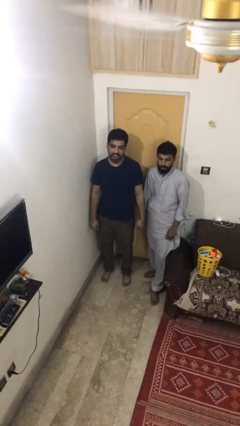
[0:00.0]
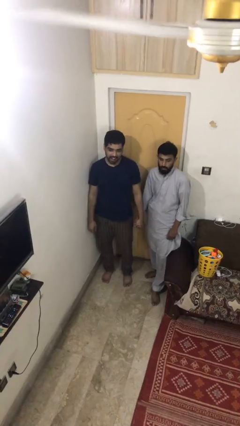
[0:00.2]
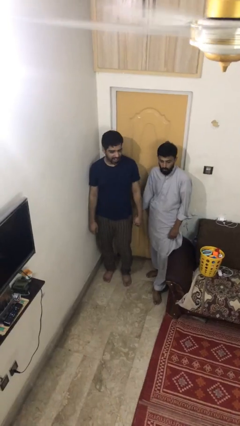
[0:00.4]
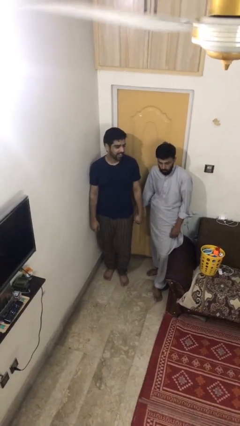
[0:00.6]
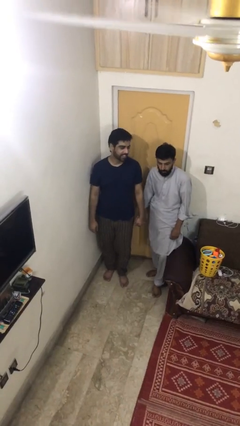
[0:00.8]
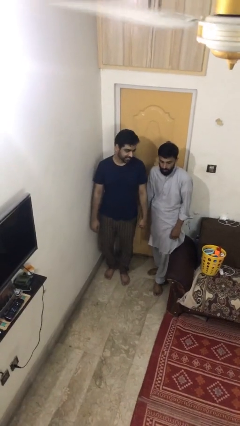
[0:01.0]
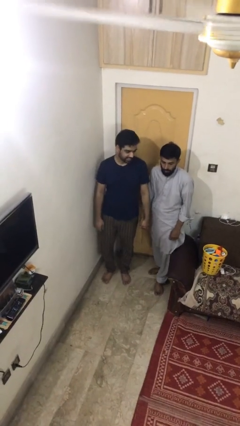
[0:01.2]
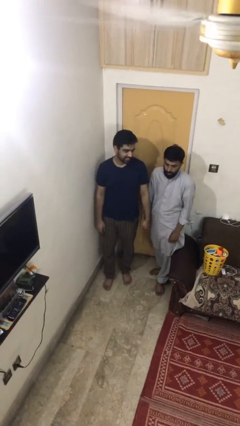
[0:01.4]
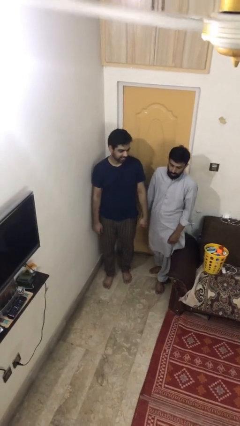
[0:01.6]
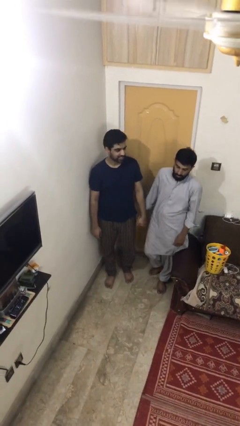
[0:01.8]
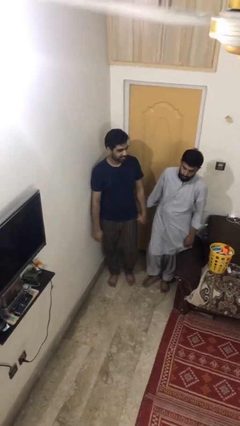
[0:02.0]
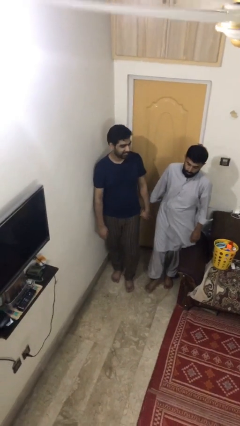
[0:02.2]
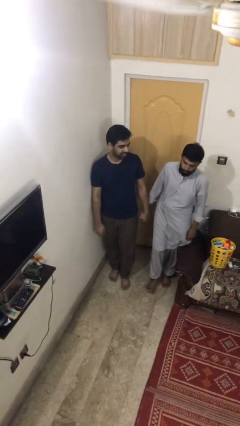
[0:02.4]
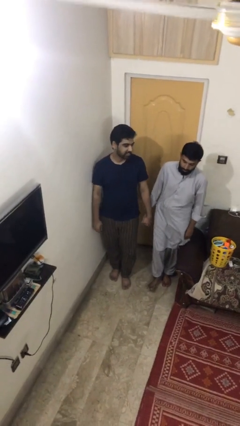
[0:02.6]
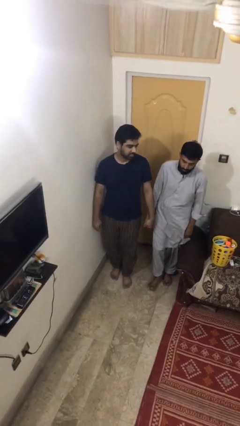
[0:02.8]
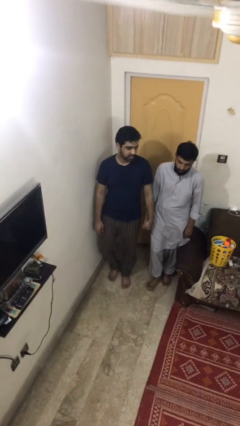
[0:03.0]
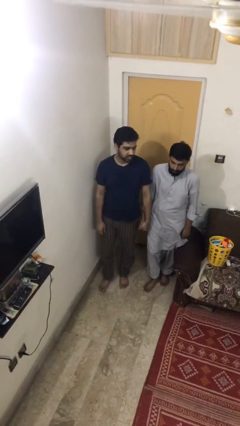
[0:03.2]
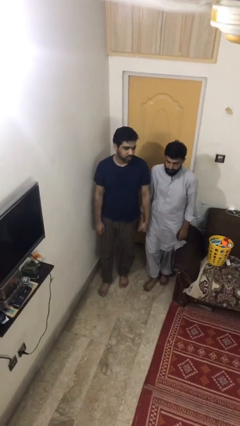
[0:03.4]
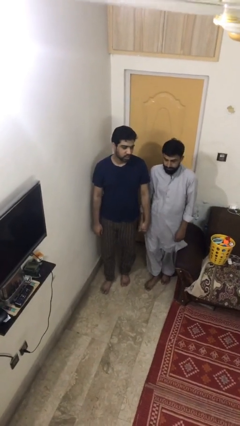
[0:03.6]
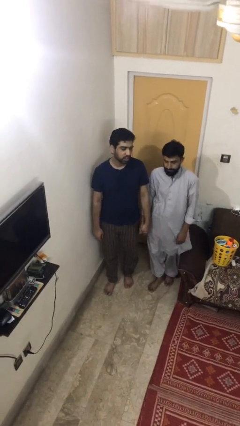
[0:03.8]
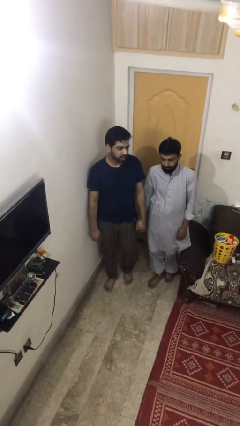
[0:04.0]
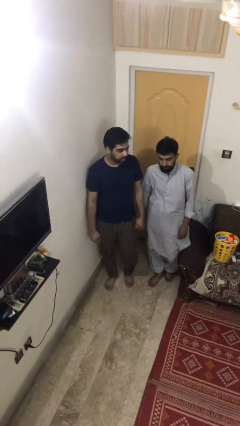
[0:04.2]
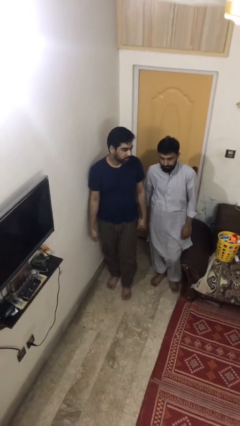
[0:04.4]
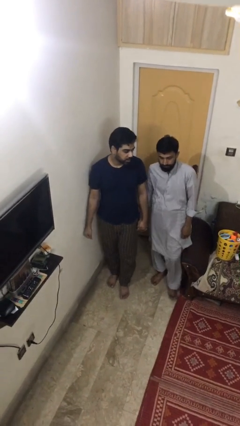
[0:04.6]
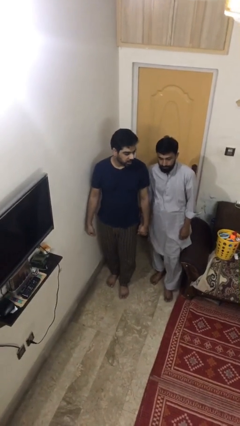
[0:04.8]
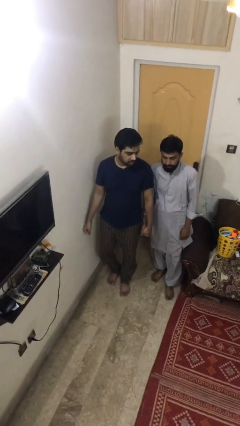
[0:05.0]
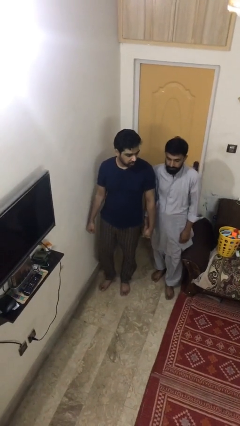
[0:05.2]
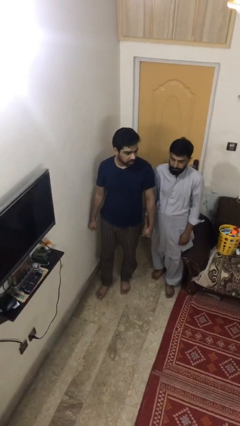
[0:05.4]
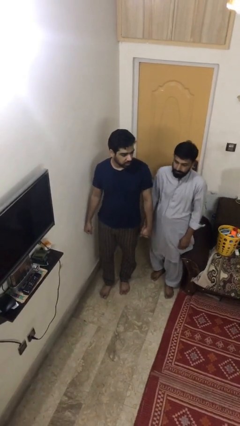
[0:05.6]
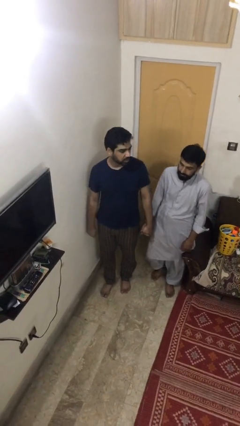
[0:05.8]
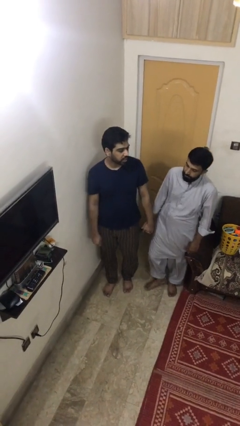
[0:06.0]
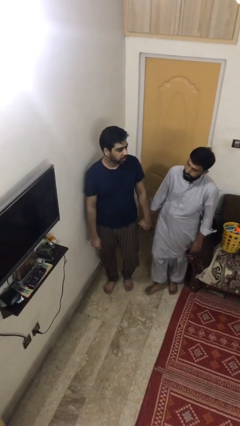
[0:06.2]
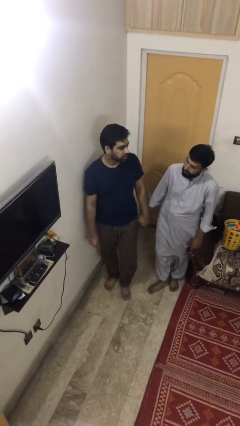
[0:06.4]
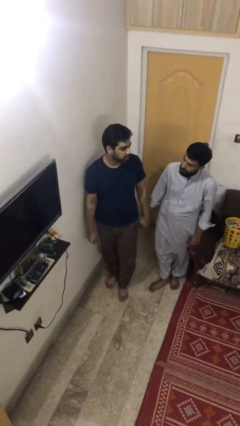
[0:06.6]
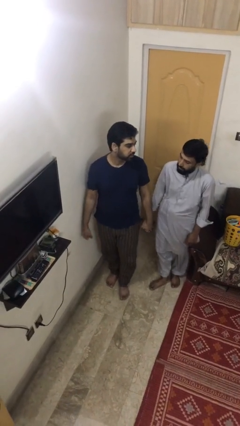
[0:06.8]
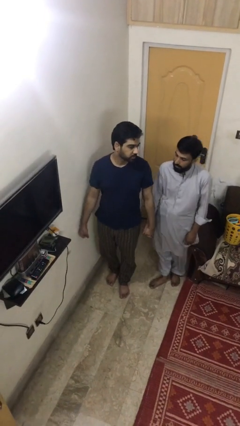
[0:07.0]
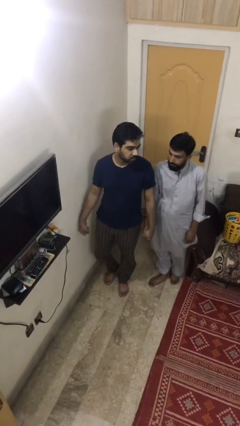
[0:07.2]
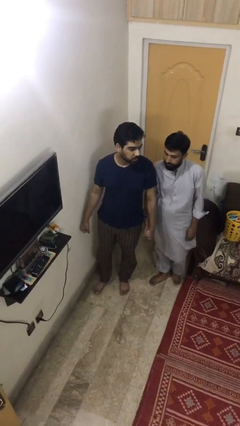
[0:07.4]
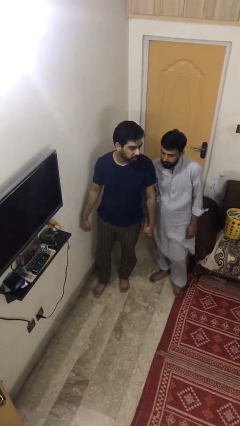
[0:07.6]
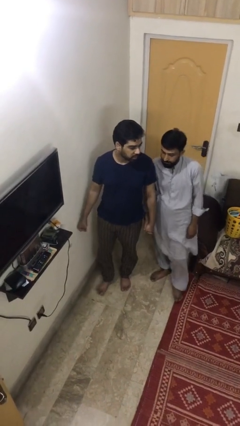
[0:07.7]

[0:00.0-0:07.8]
person holds hand

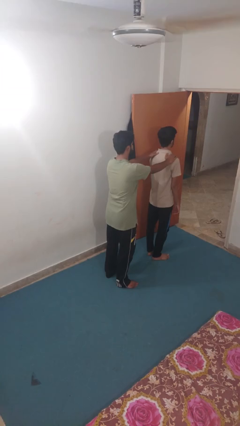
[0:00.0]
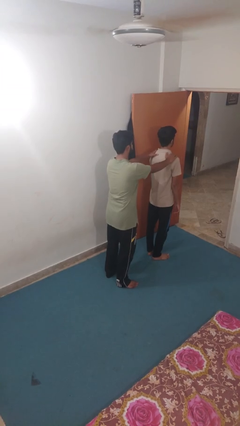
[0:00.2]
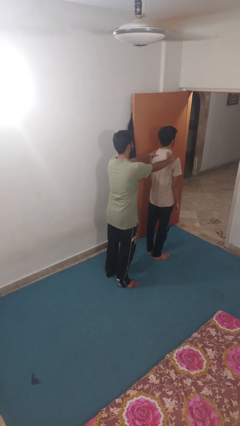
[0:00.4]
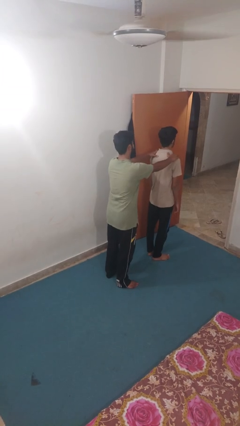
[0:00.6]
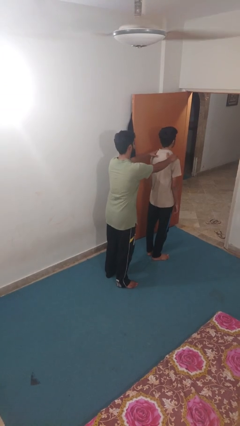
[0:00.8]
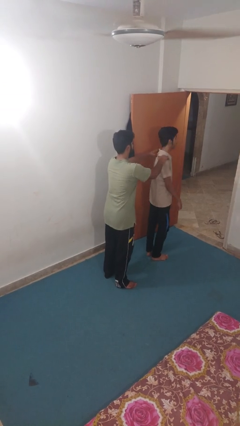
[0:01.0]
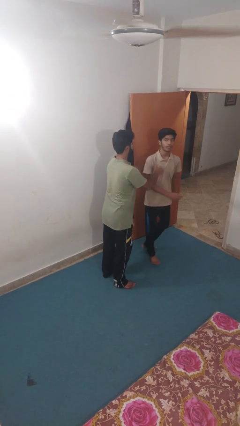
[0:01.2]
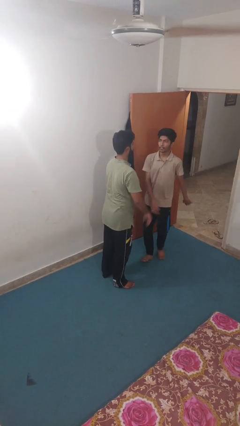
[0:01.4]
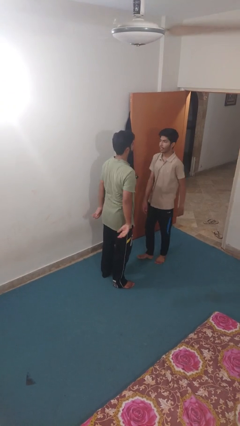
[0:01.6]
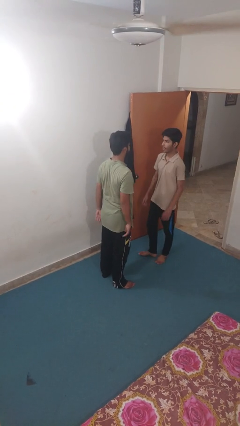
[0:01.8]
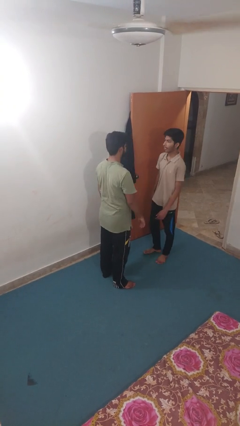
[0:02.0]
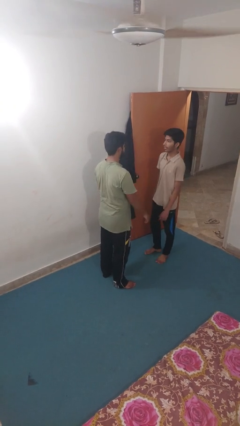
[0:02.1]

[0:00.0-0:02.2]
person spins person around

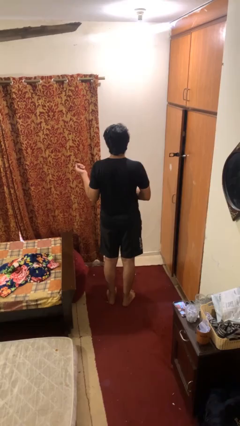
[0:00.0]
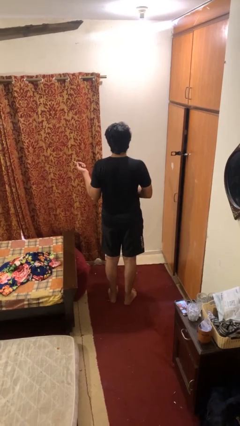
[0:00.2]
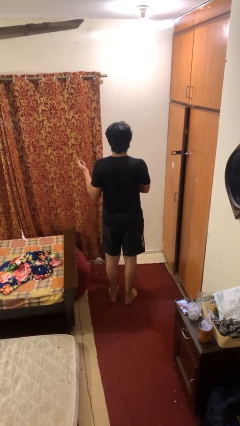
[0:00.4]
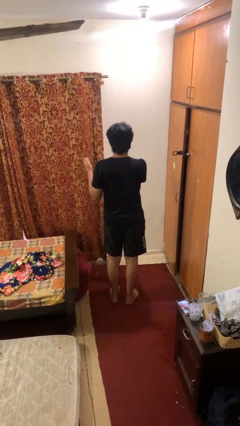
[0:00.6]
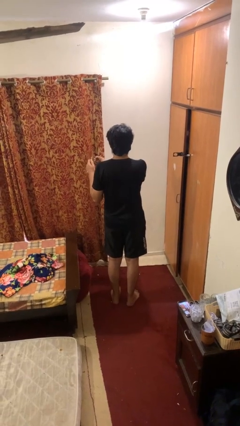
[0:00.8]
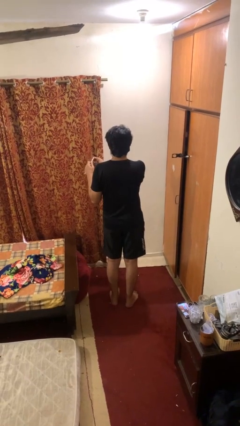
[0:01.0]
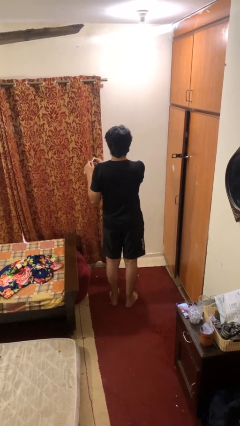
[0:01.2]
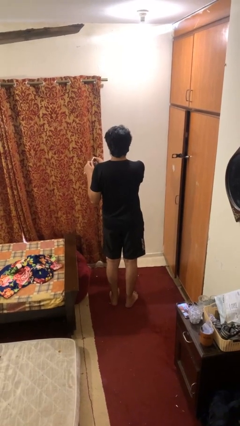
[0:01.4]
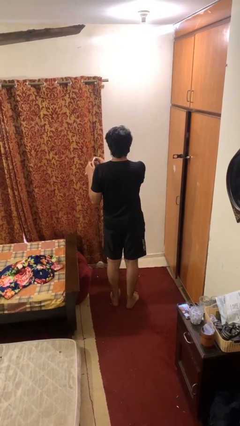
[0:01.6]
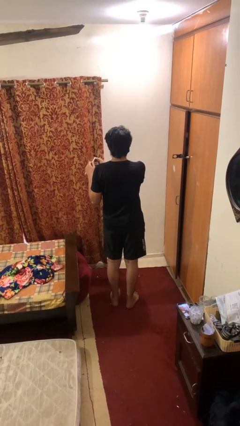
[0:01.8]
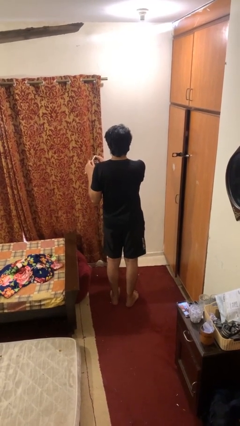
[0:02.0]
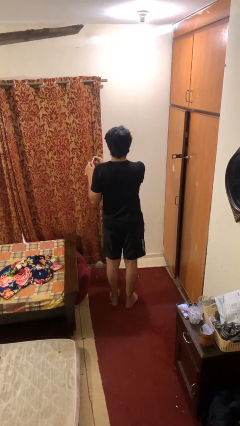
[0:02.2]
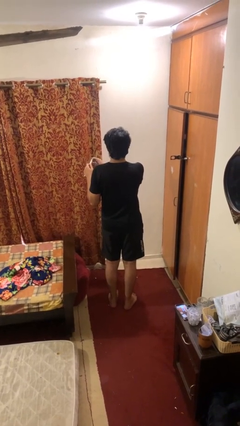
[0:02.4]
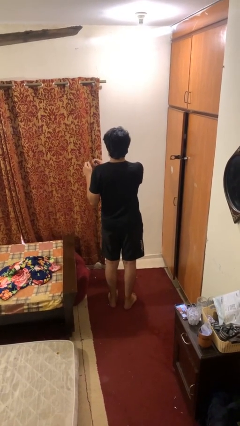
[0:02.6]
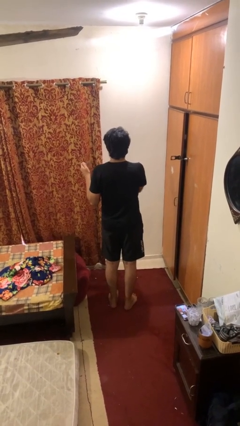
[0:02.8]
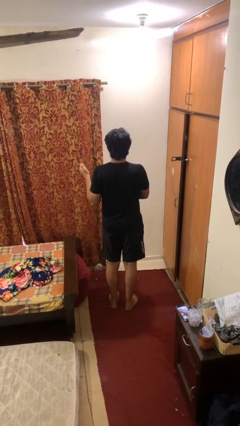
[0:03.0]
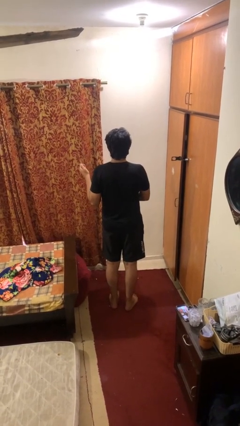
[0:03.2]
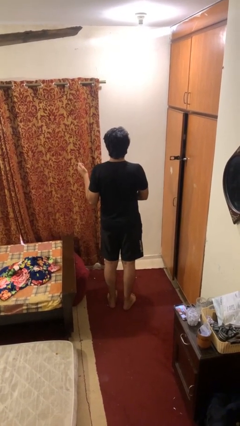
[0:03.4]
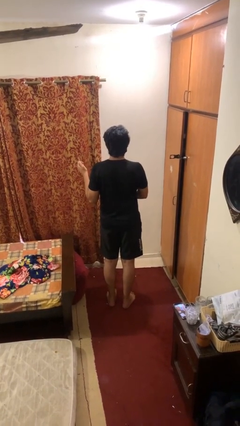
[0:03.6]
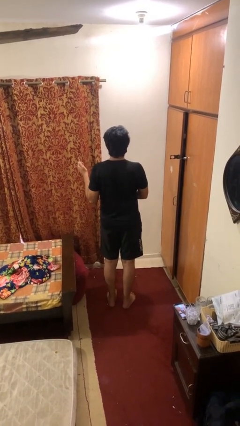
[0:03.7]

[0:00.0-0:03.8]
person files fingernails

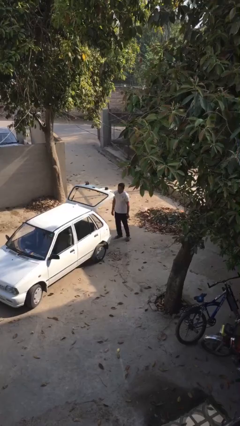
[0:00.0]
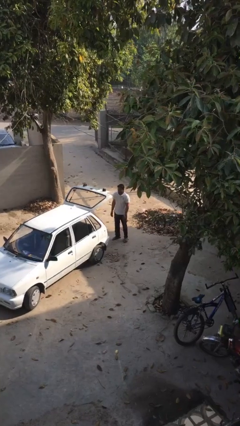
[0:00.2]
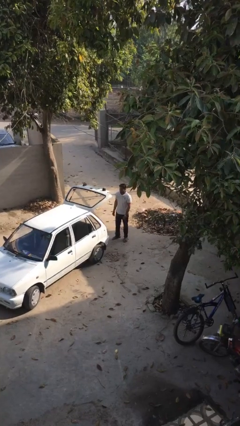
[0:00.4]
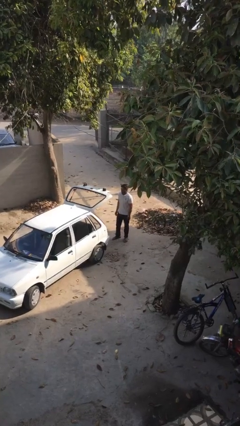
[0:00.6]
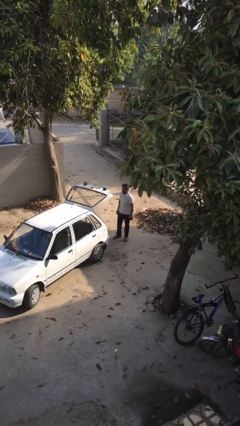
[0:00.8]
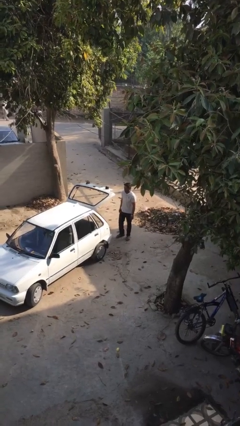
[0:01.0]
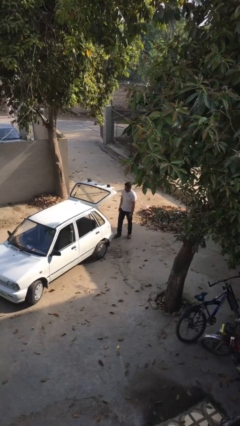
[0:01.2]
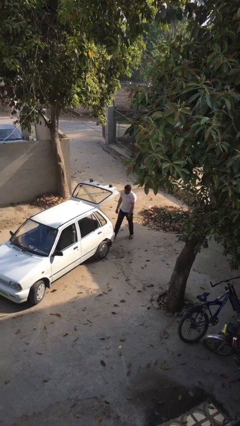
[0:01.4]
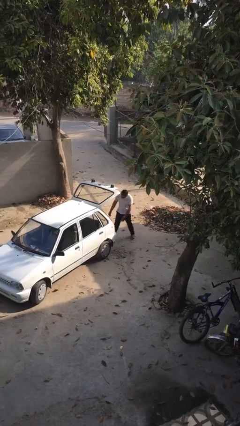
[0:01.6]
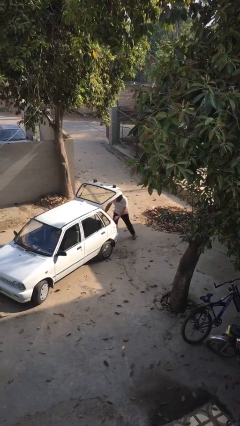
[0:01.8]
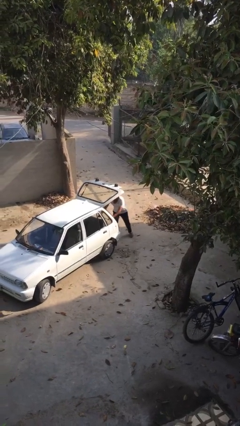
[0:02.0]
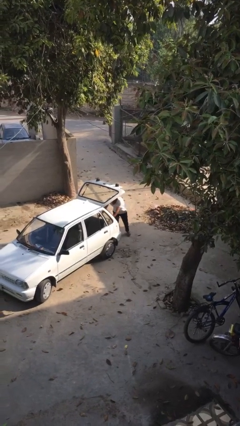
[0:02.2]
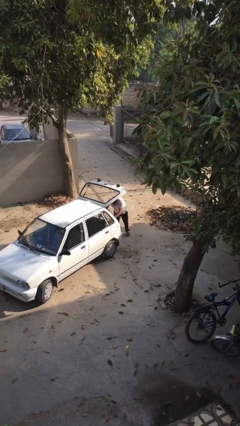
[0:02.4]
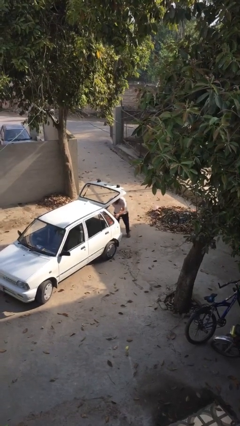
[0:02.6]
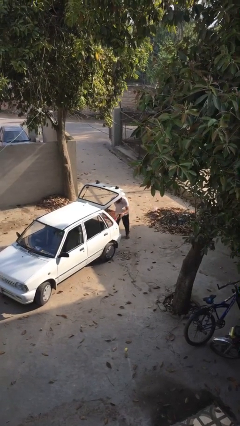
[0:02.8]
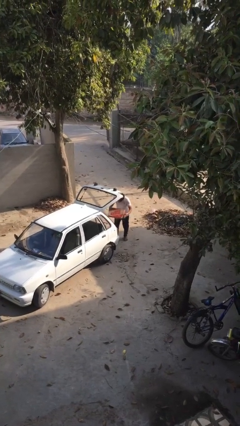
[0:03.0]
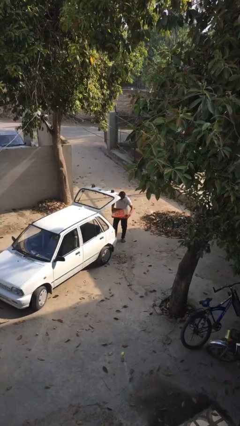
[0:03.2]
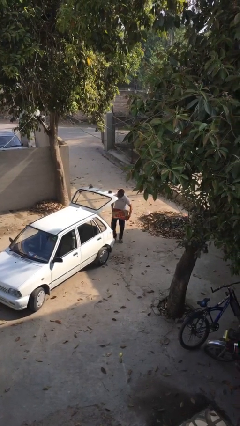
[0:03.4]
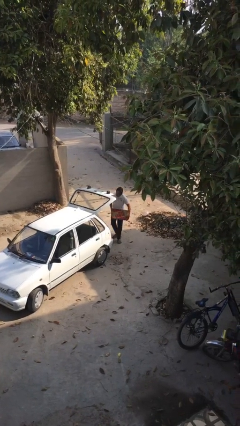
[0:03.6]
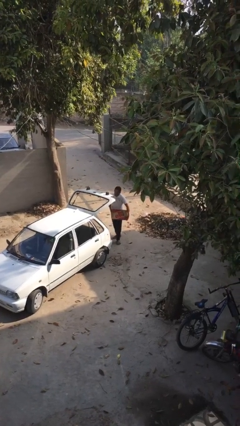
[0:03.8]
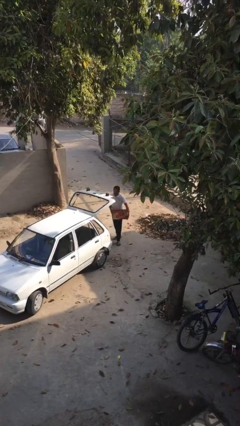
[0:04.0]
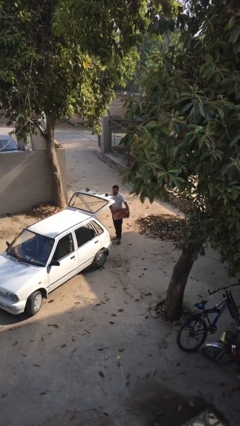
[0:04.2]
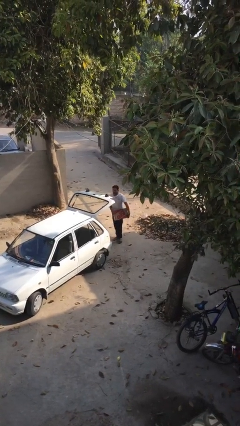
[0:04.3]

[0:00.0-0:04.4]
person unloads car
